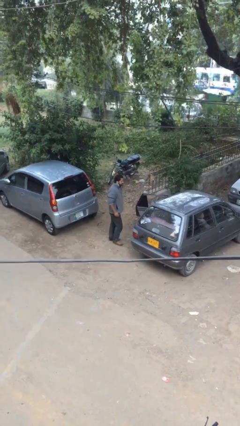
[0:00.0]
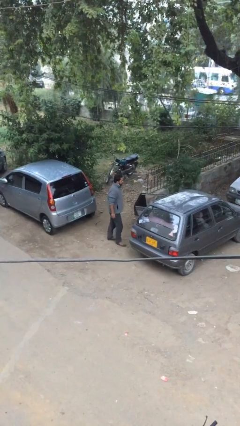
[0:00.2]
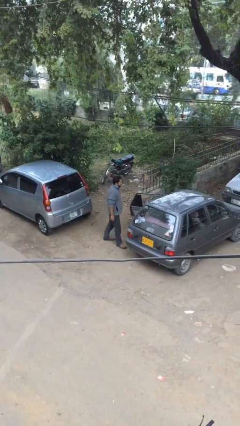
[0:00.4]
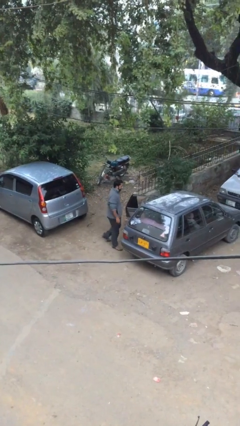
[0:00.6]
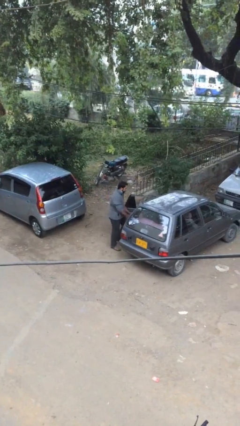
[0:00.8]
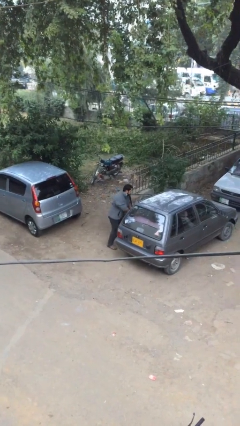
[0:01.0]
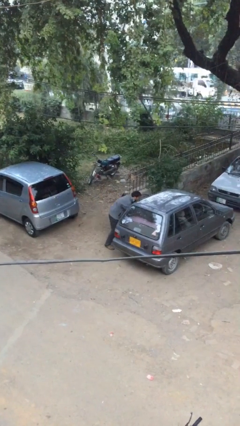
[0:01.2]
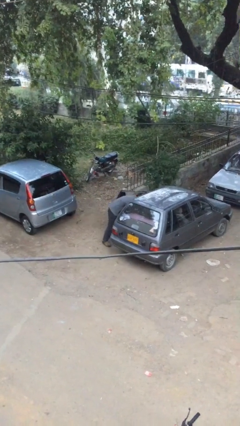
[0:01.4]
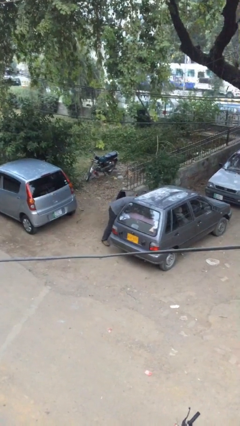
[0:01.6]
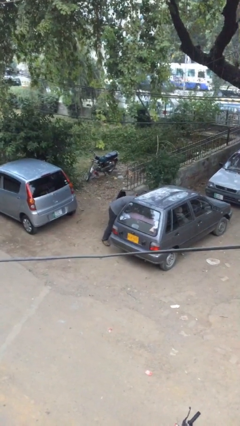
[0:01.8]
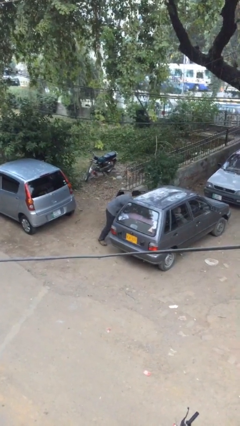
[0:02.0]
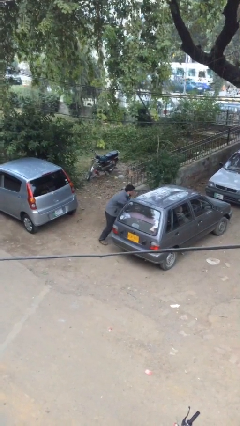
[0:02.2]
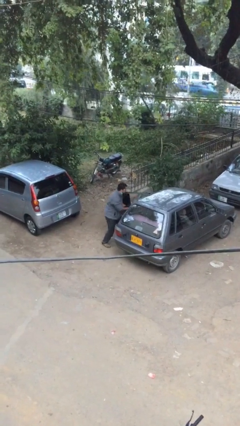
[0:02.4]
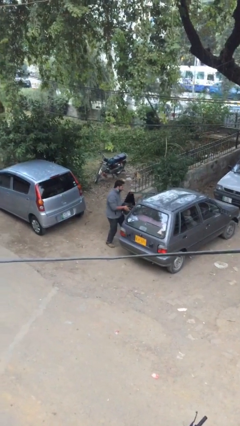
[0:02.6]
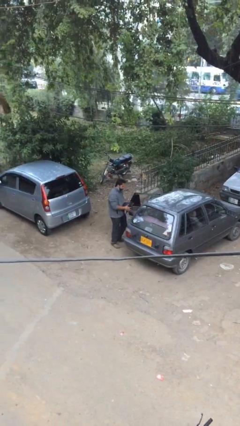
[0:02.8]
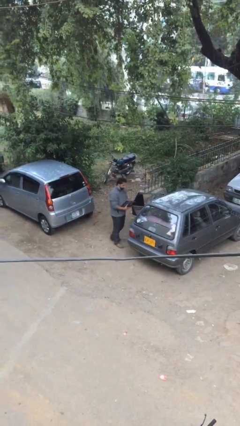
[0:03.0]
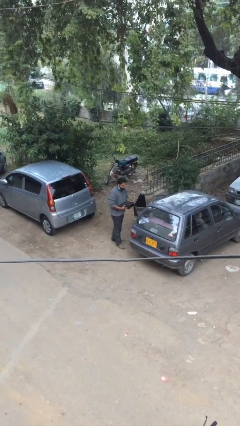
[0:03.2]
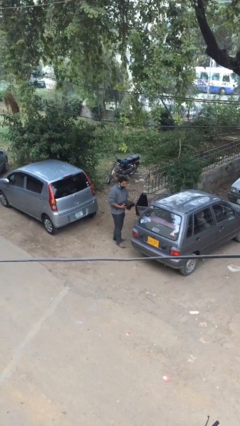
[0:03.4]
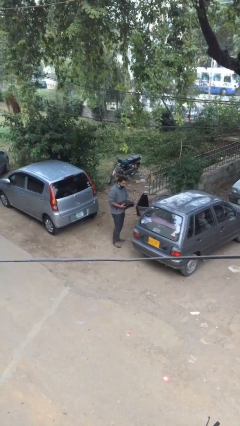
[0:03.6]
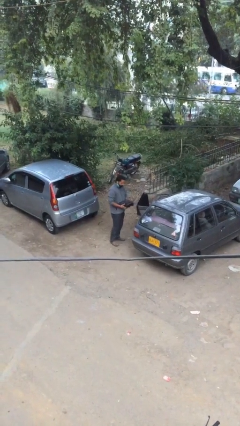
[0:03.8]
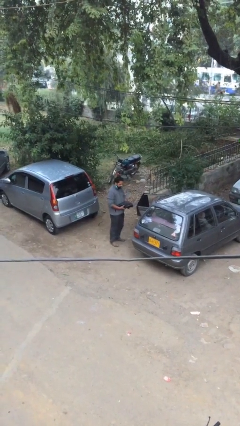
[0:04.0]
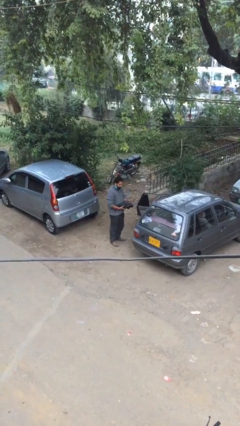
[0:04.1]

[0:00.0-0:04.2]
person unloads car

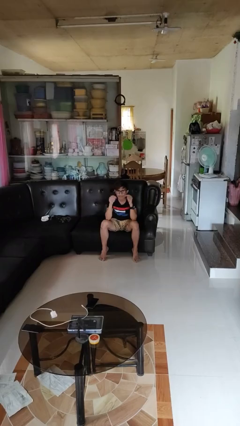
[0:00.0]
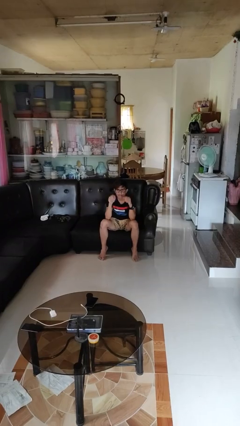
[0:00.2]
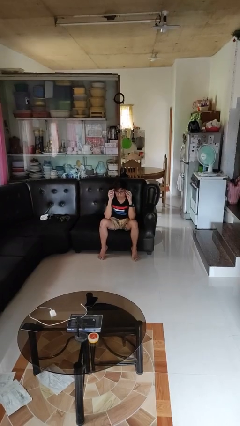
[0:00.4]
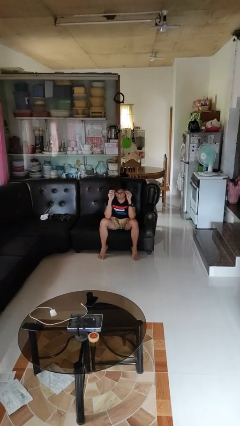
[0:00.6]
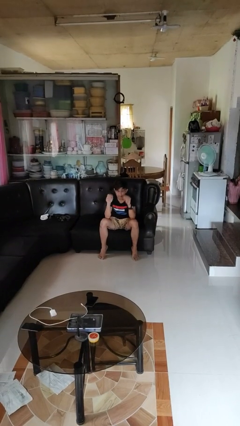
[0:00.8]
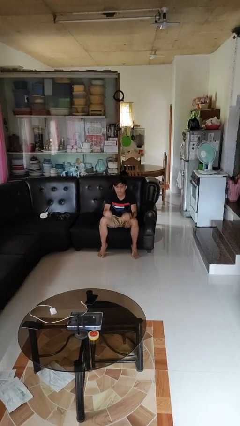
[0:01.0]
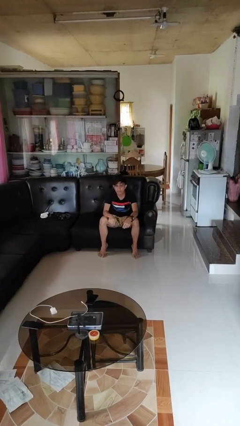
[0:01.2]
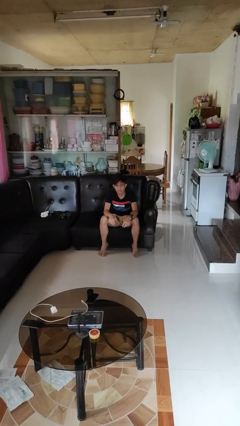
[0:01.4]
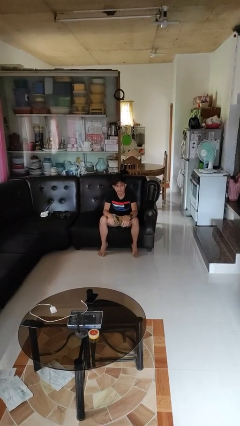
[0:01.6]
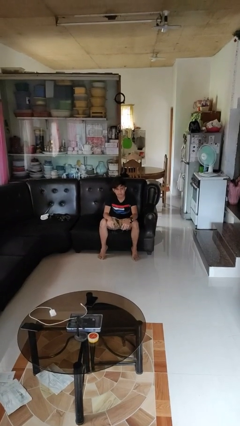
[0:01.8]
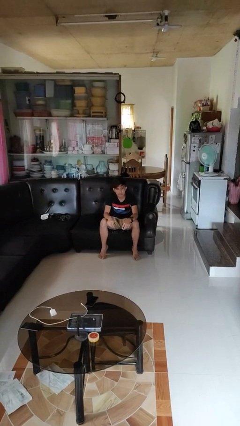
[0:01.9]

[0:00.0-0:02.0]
person takes off glasses

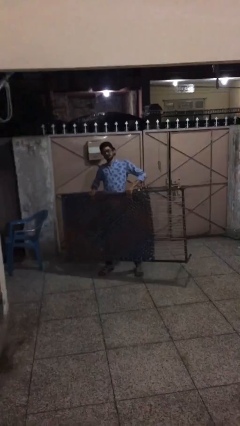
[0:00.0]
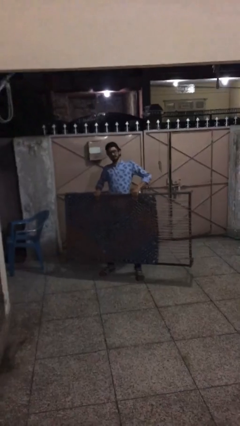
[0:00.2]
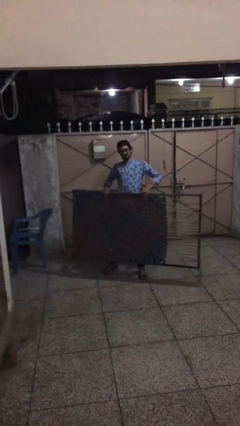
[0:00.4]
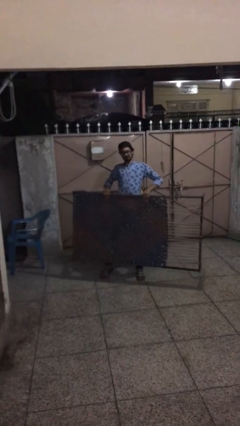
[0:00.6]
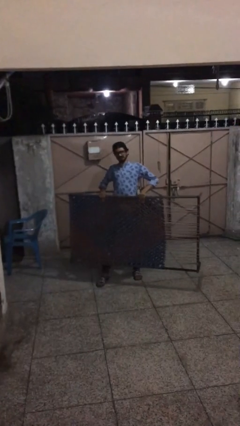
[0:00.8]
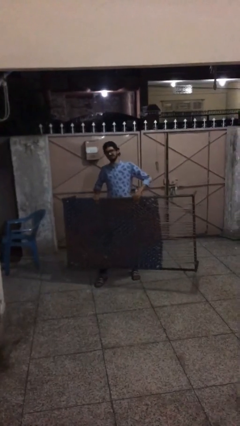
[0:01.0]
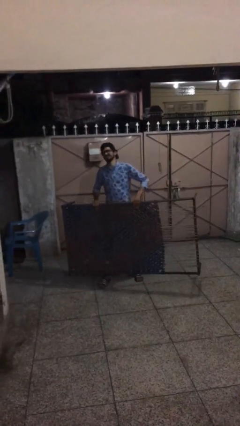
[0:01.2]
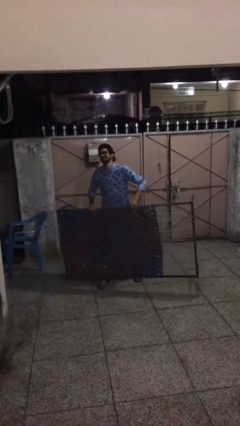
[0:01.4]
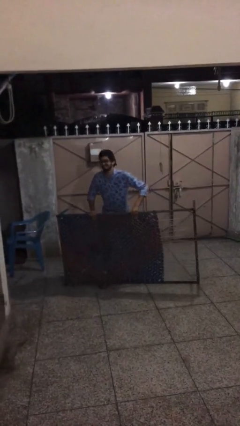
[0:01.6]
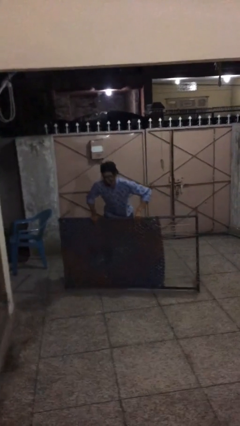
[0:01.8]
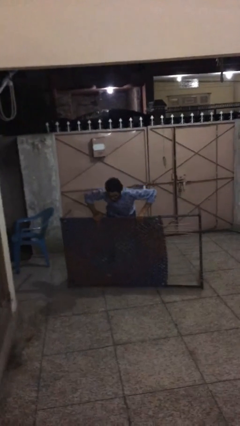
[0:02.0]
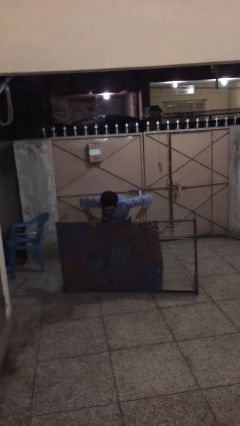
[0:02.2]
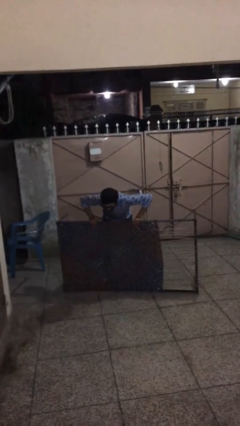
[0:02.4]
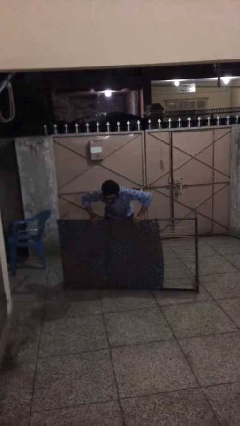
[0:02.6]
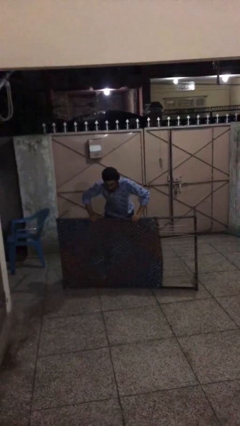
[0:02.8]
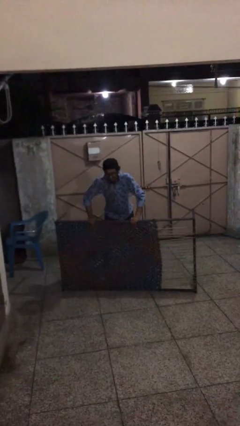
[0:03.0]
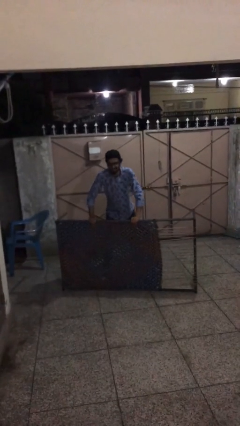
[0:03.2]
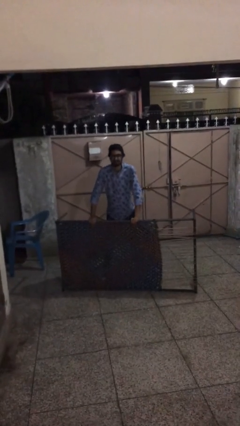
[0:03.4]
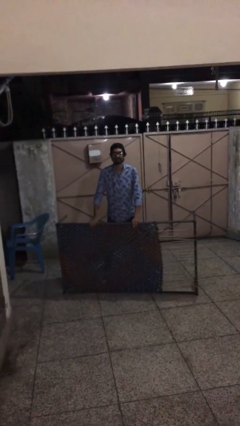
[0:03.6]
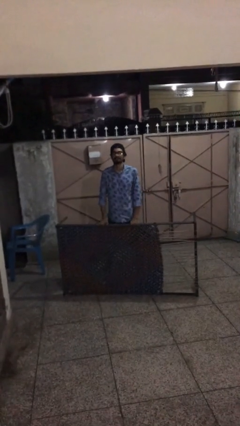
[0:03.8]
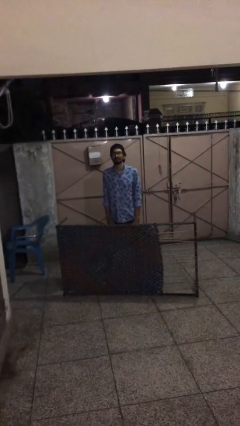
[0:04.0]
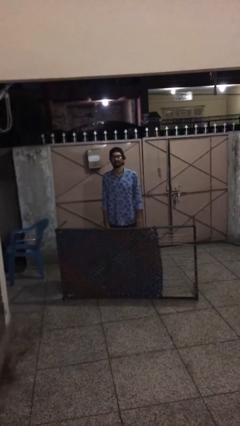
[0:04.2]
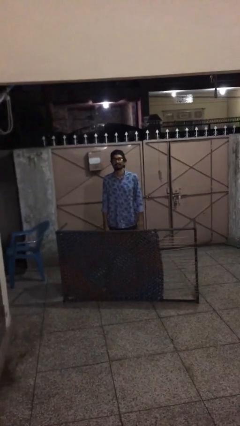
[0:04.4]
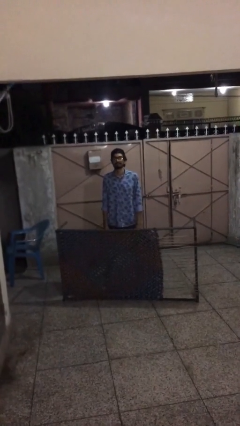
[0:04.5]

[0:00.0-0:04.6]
person puts down object on floor

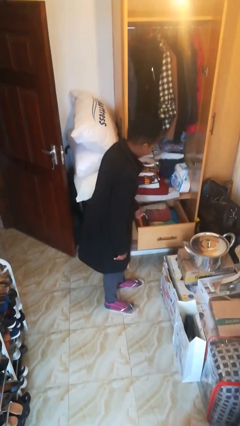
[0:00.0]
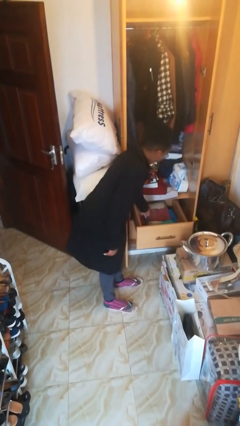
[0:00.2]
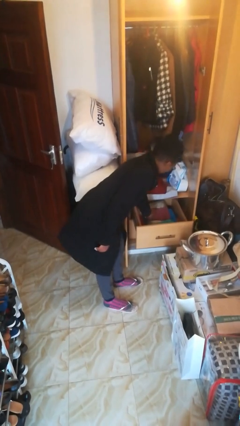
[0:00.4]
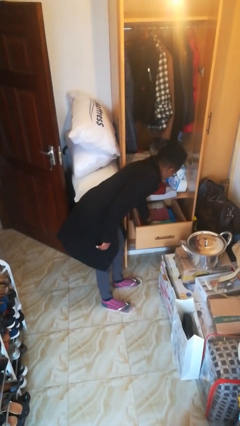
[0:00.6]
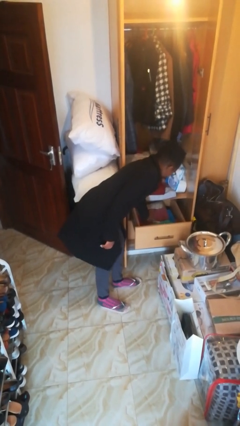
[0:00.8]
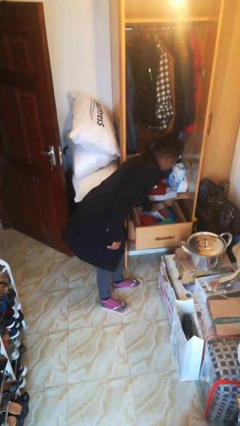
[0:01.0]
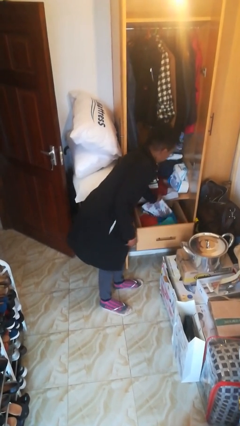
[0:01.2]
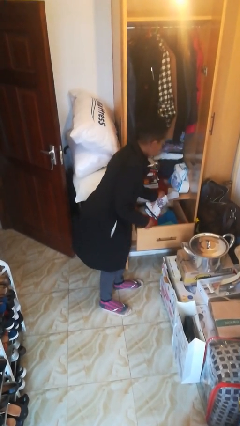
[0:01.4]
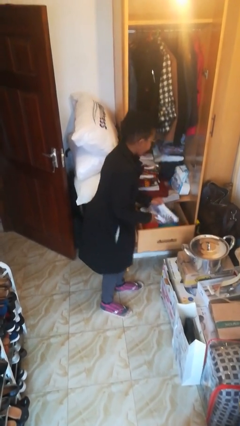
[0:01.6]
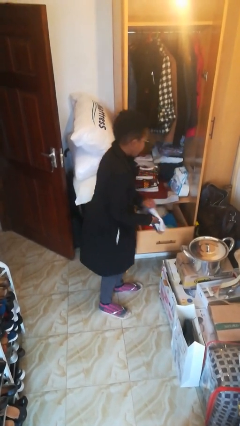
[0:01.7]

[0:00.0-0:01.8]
person takes clothes from dresser

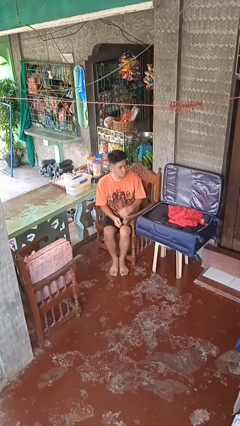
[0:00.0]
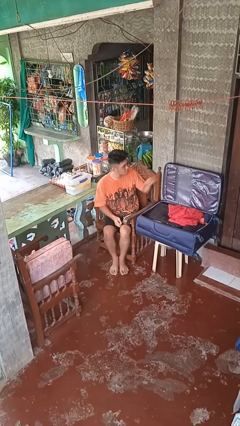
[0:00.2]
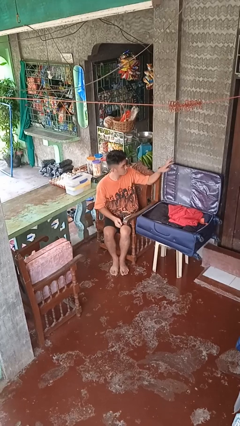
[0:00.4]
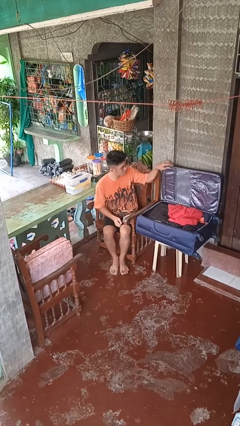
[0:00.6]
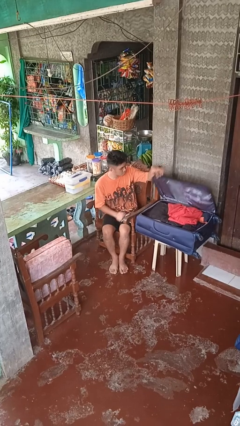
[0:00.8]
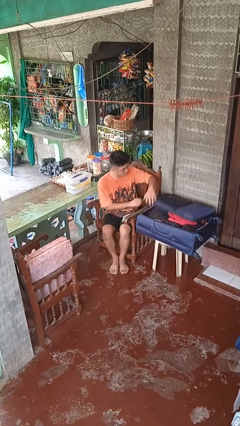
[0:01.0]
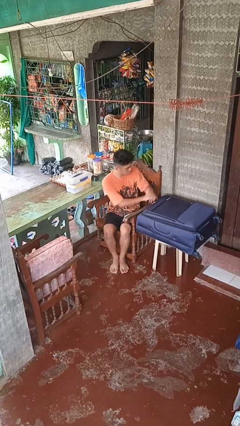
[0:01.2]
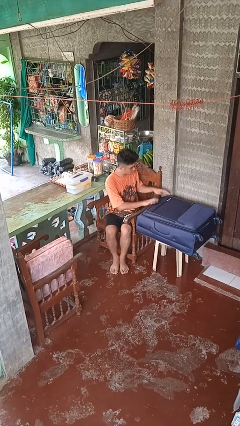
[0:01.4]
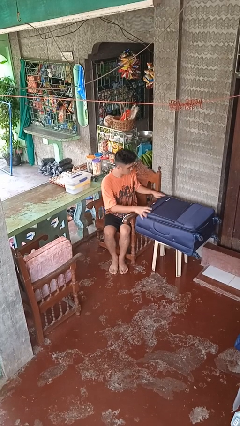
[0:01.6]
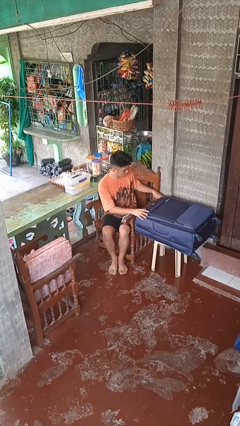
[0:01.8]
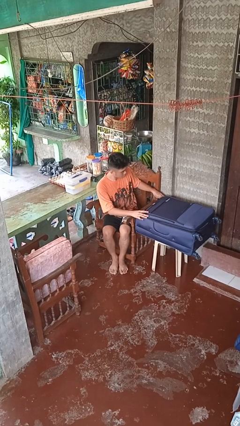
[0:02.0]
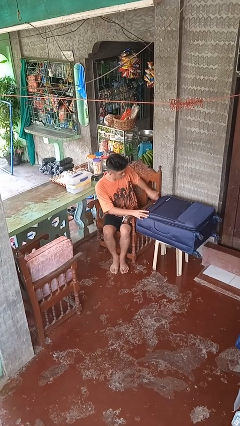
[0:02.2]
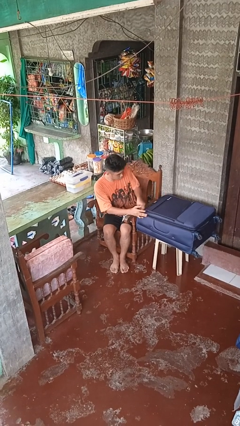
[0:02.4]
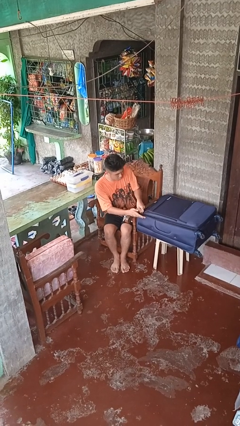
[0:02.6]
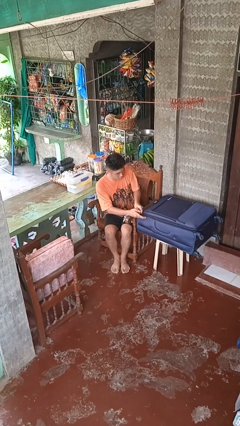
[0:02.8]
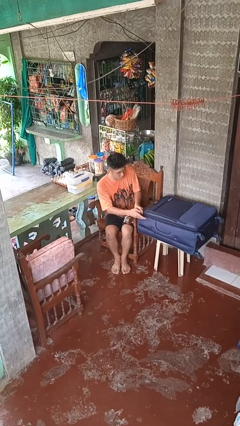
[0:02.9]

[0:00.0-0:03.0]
person closes suitcase

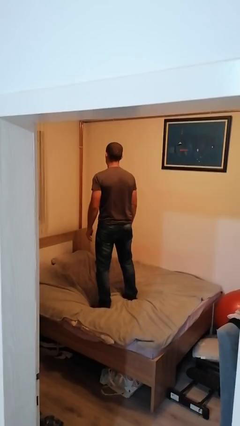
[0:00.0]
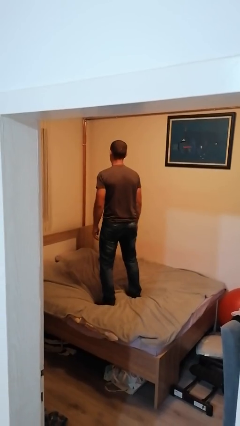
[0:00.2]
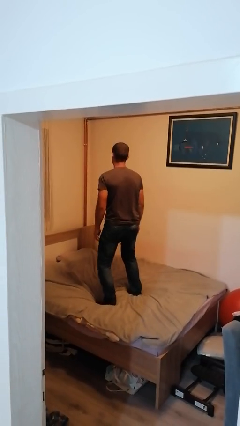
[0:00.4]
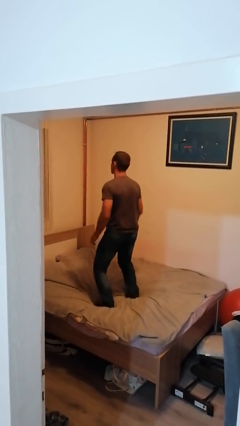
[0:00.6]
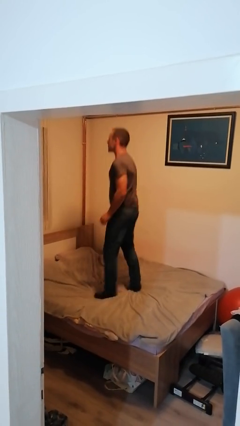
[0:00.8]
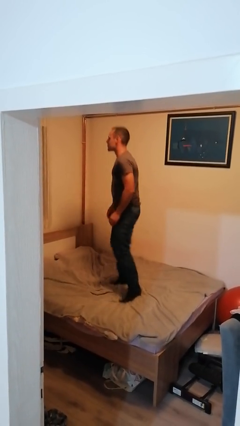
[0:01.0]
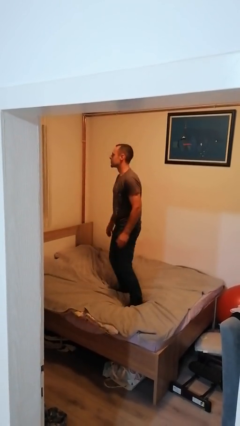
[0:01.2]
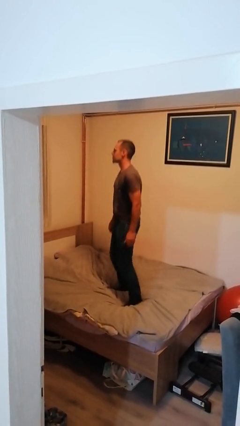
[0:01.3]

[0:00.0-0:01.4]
person jumps on bed

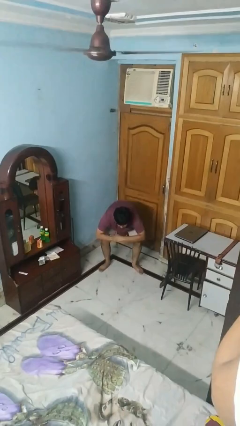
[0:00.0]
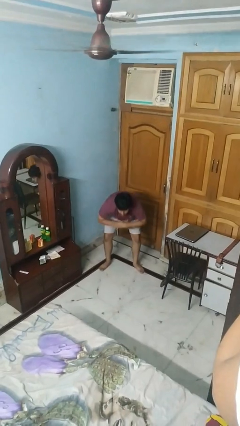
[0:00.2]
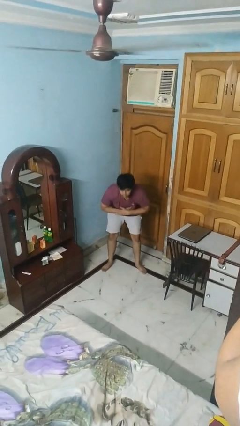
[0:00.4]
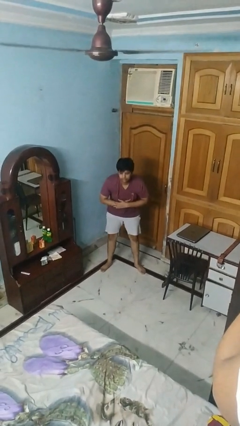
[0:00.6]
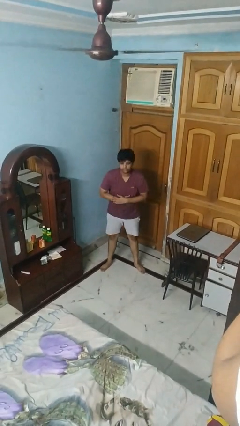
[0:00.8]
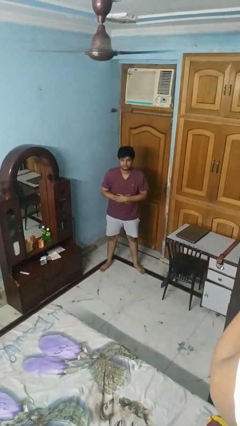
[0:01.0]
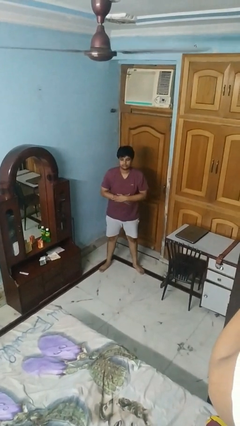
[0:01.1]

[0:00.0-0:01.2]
person stands up
